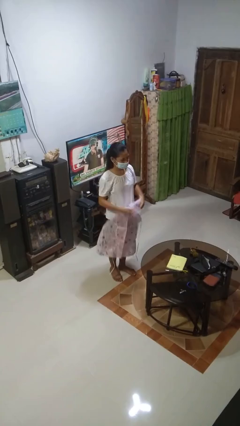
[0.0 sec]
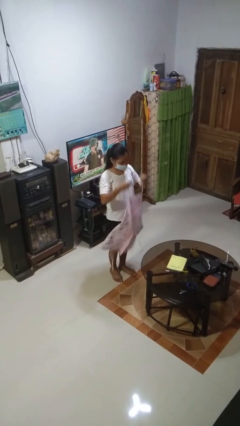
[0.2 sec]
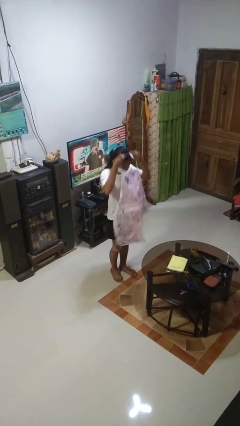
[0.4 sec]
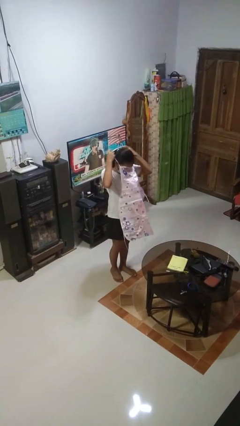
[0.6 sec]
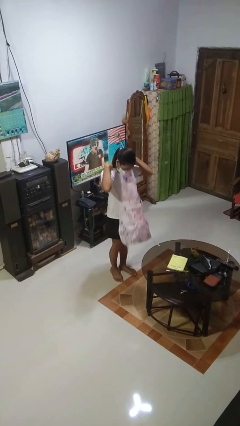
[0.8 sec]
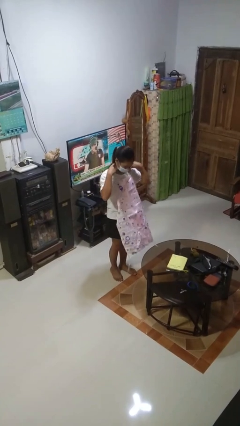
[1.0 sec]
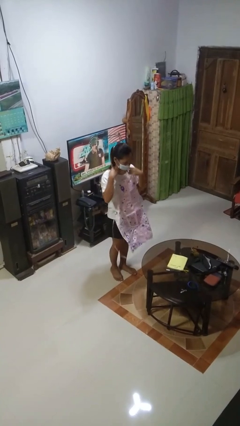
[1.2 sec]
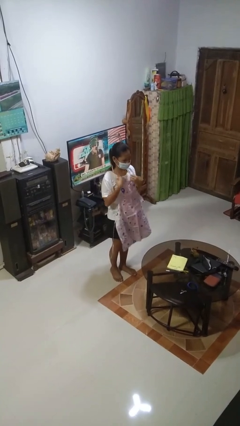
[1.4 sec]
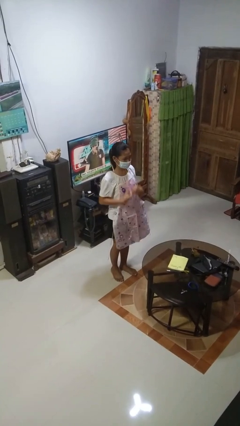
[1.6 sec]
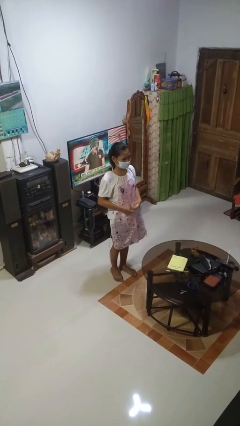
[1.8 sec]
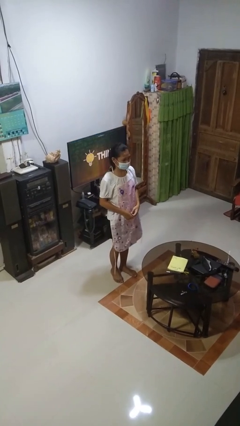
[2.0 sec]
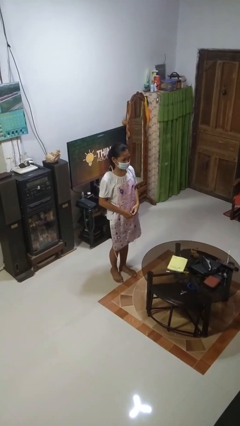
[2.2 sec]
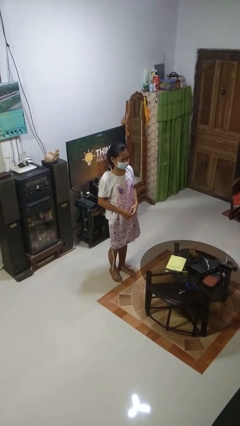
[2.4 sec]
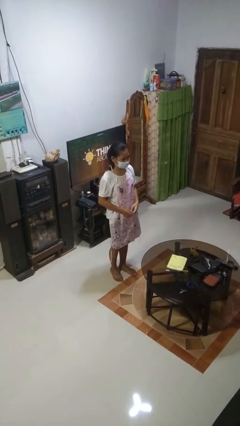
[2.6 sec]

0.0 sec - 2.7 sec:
person puts on apron

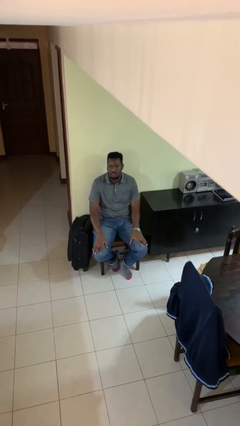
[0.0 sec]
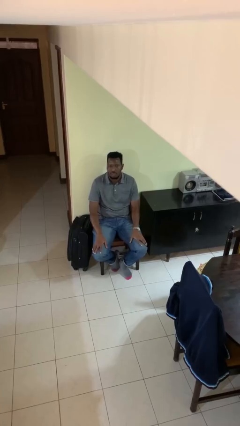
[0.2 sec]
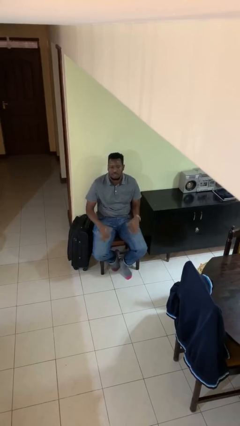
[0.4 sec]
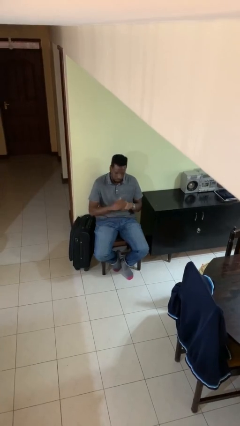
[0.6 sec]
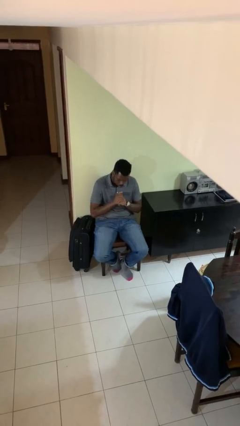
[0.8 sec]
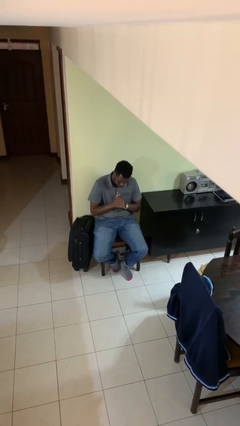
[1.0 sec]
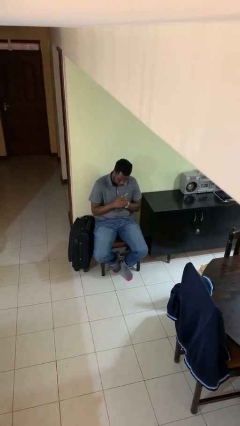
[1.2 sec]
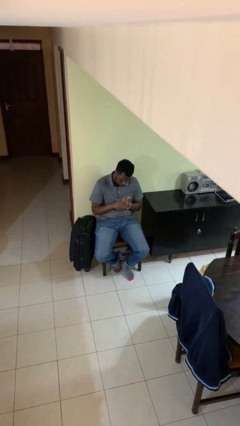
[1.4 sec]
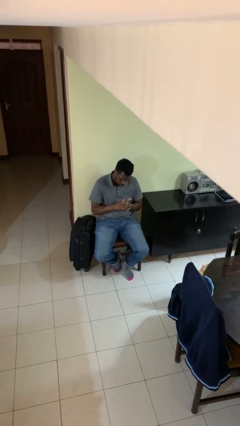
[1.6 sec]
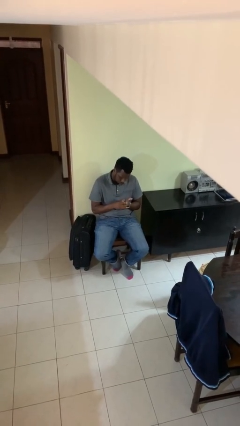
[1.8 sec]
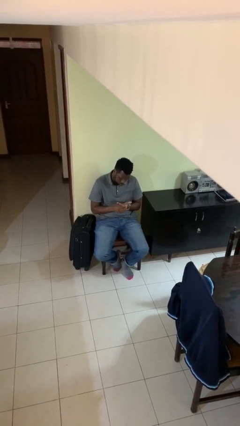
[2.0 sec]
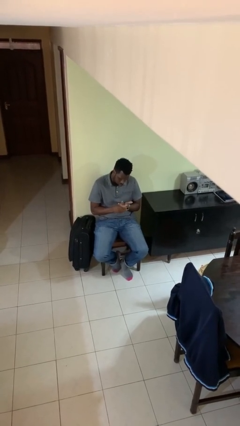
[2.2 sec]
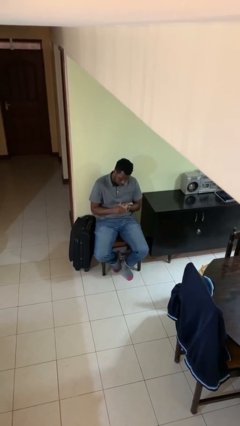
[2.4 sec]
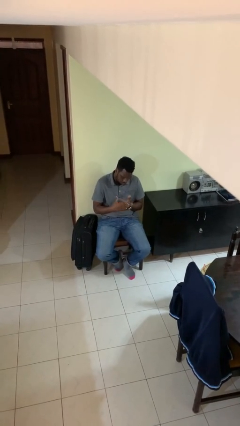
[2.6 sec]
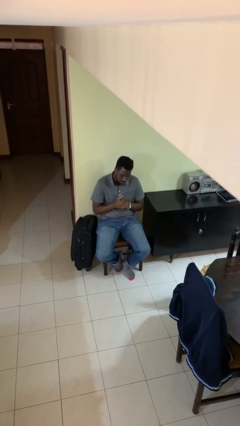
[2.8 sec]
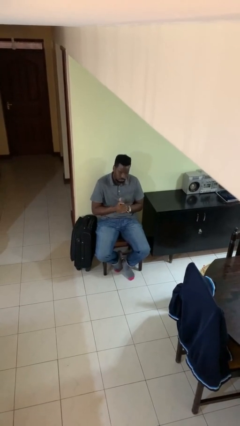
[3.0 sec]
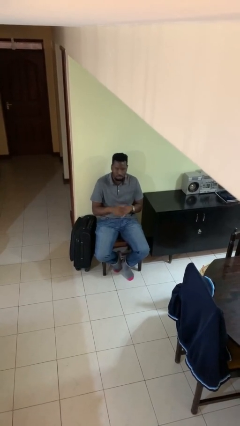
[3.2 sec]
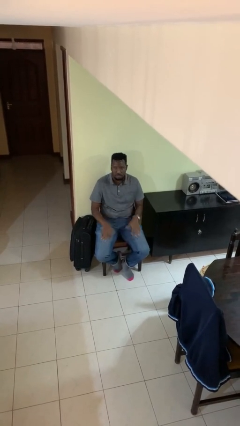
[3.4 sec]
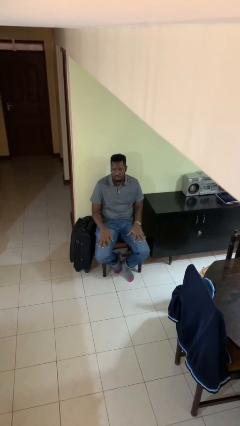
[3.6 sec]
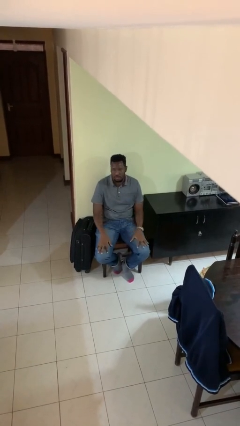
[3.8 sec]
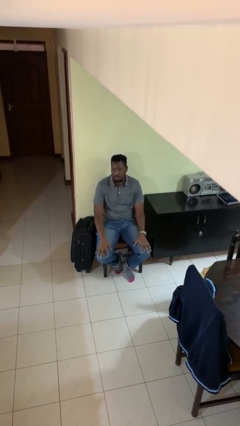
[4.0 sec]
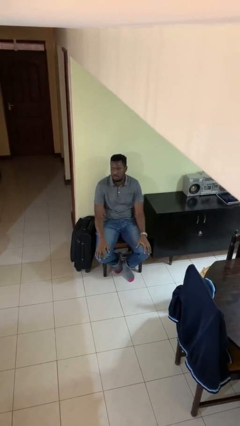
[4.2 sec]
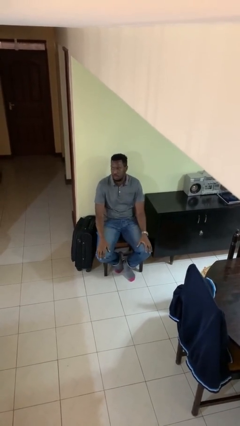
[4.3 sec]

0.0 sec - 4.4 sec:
person cracks knuckles

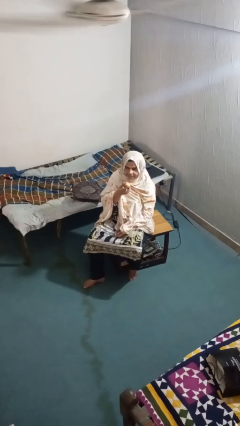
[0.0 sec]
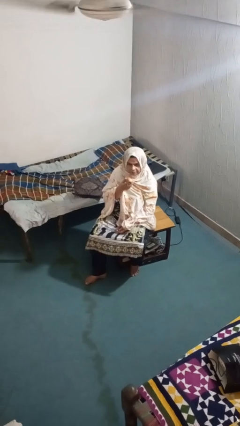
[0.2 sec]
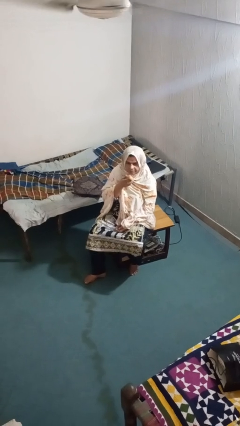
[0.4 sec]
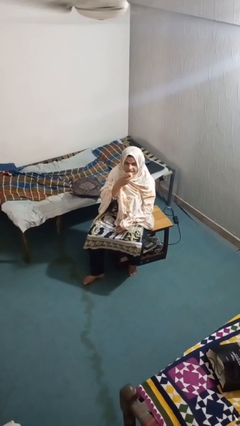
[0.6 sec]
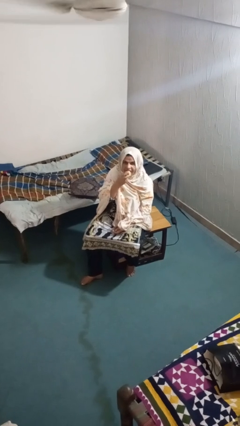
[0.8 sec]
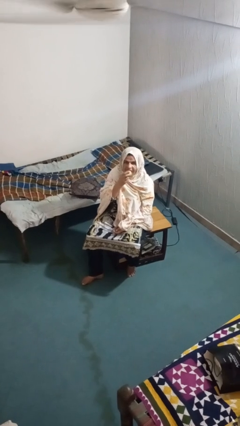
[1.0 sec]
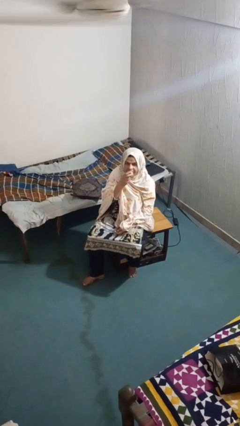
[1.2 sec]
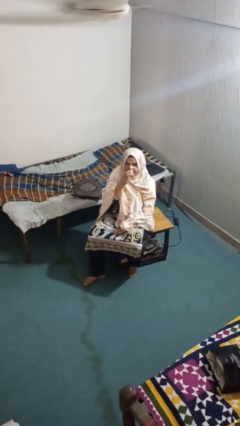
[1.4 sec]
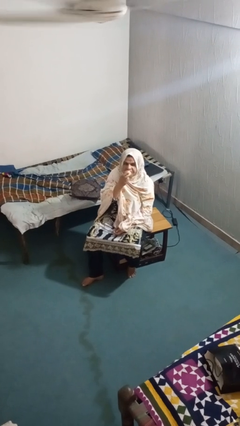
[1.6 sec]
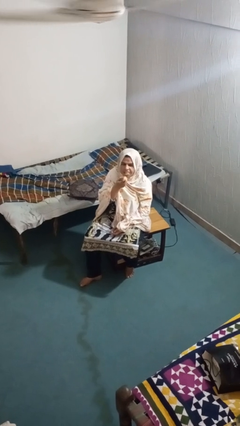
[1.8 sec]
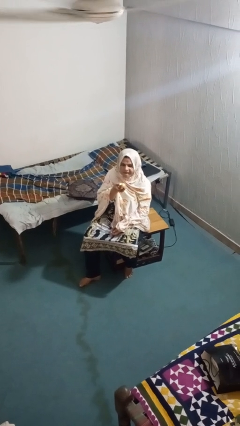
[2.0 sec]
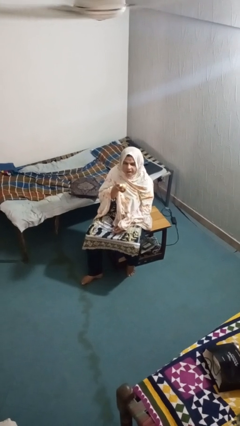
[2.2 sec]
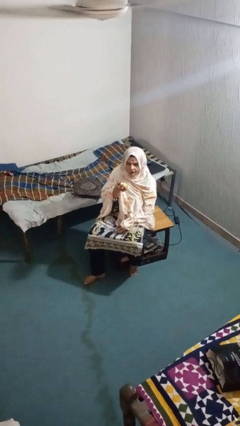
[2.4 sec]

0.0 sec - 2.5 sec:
person eats apple

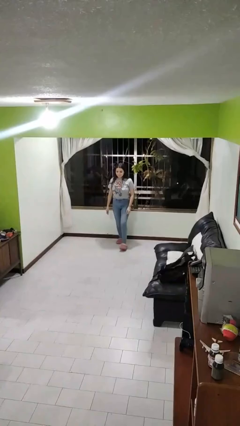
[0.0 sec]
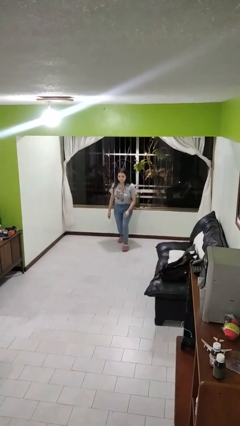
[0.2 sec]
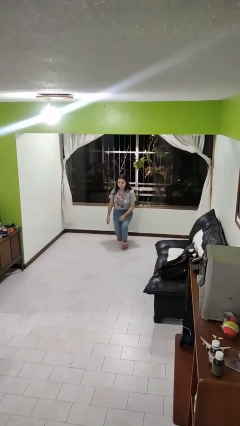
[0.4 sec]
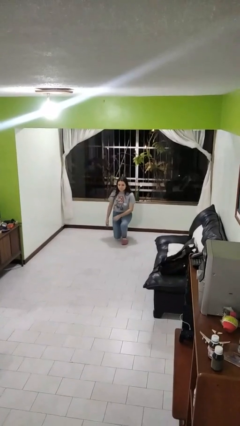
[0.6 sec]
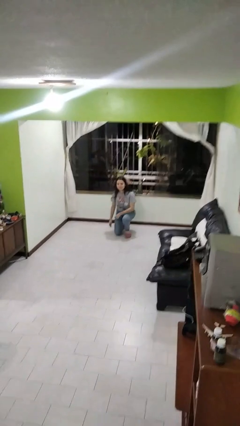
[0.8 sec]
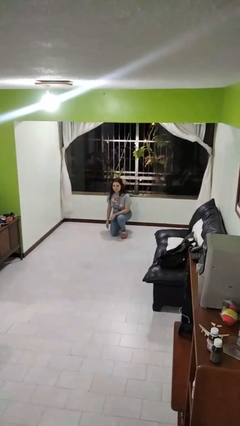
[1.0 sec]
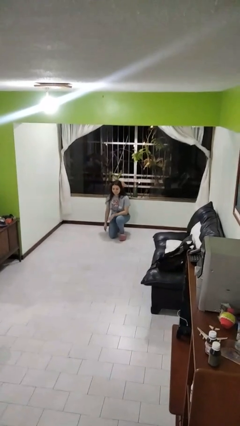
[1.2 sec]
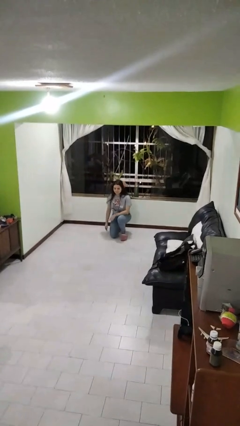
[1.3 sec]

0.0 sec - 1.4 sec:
person kneels

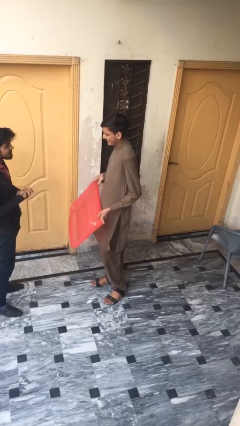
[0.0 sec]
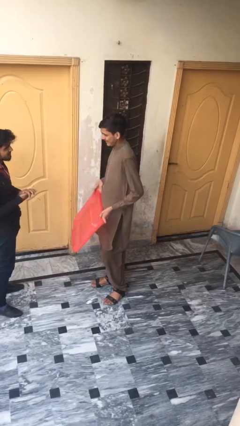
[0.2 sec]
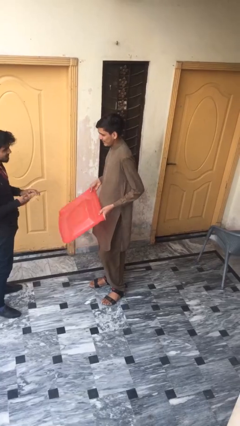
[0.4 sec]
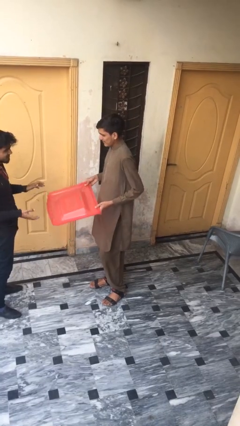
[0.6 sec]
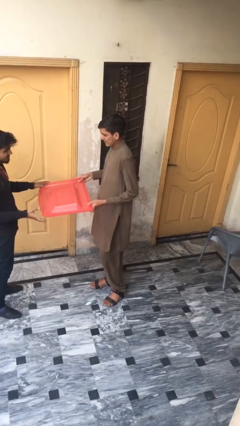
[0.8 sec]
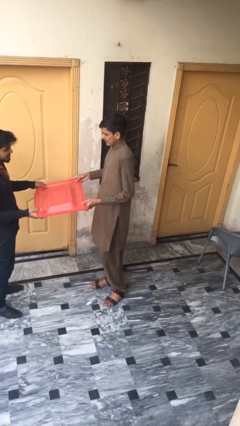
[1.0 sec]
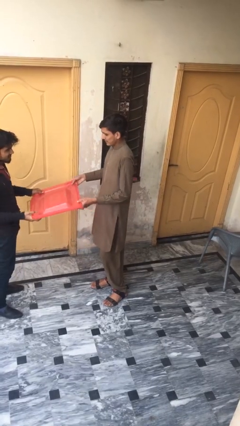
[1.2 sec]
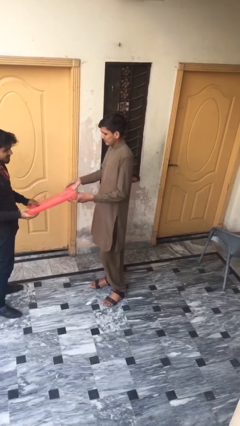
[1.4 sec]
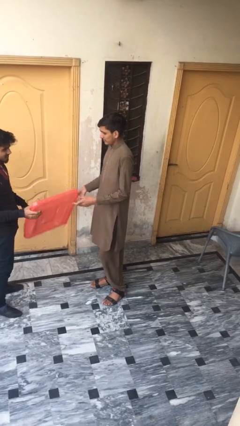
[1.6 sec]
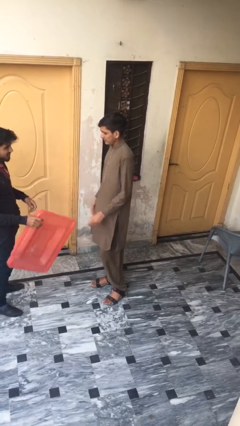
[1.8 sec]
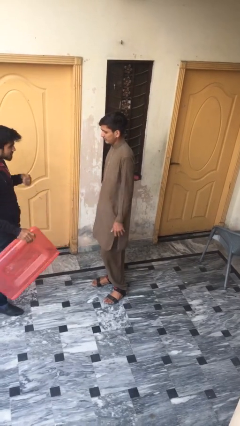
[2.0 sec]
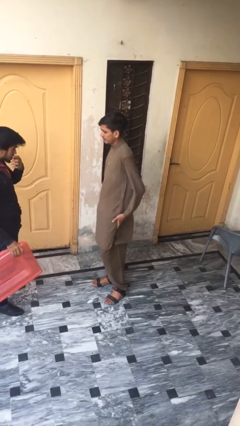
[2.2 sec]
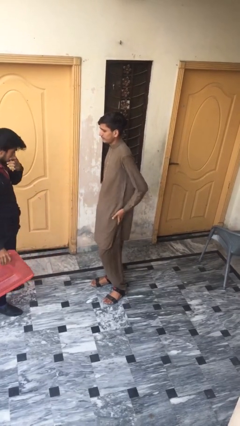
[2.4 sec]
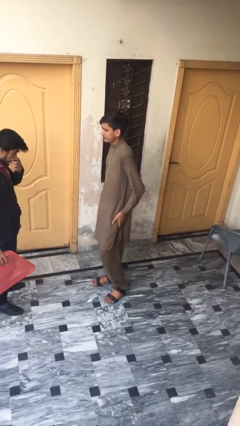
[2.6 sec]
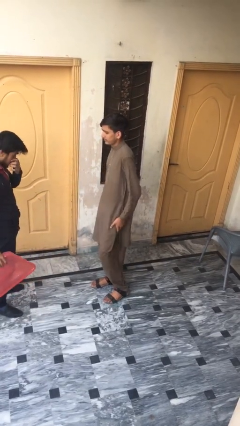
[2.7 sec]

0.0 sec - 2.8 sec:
person transfers object to person

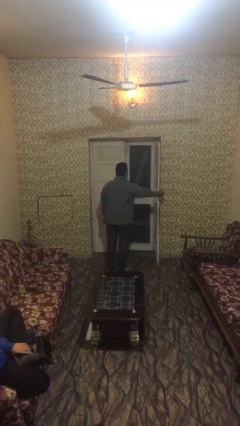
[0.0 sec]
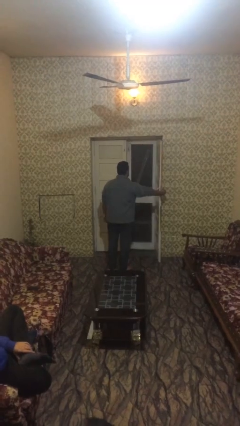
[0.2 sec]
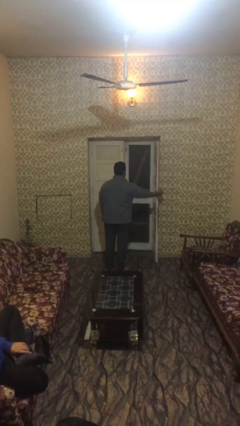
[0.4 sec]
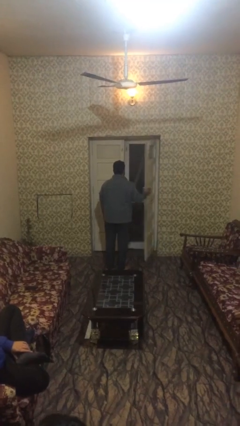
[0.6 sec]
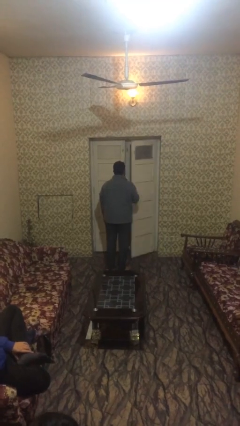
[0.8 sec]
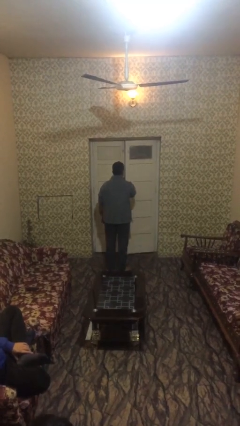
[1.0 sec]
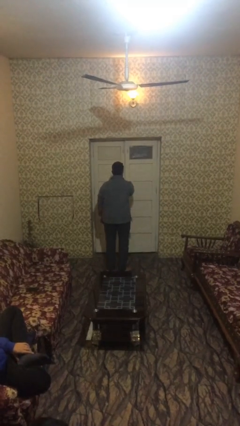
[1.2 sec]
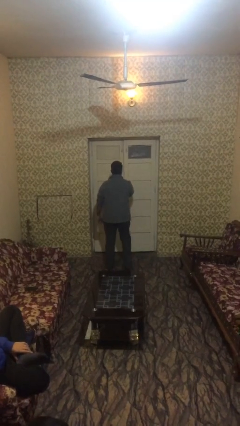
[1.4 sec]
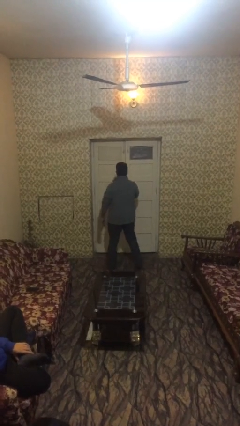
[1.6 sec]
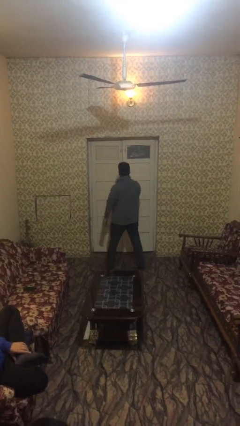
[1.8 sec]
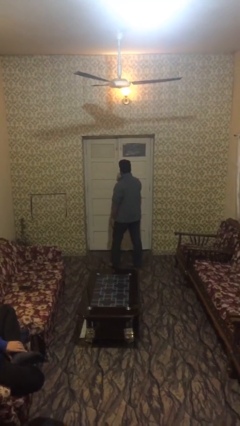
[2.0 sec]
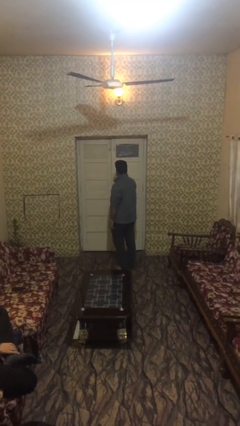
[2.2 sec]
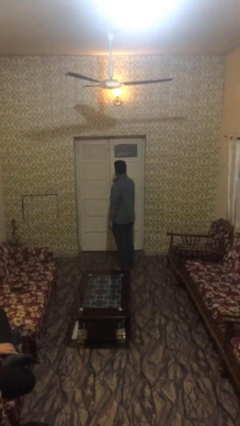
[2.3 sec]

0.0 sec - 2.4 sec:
person closes facility door

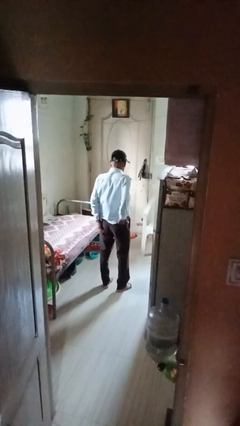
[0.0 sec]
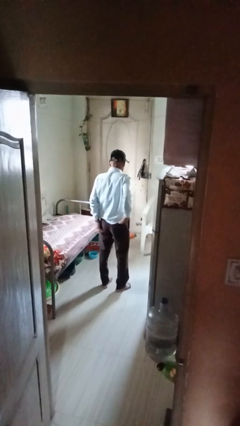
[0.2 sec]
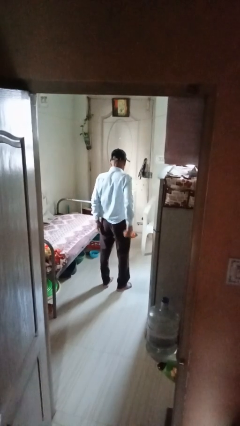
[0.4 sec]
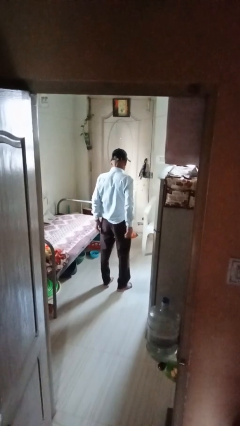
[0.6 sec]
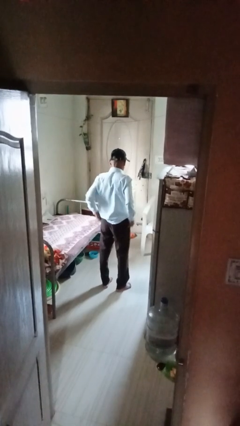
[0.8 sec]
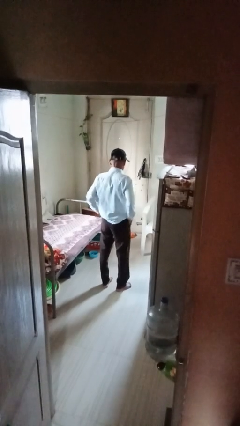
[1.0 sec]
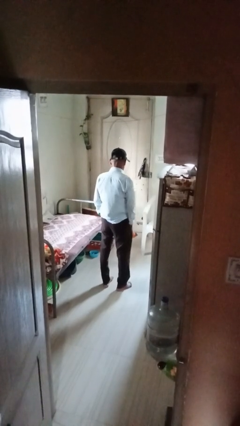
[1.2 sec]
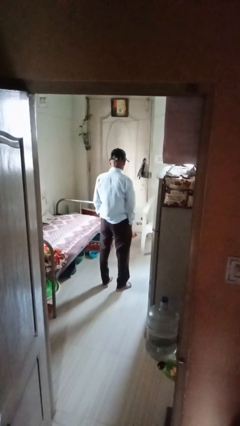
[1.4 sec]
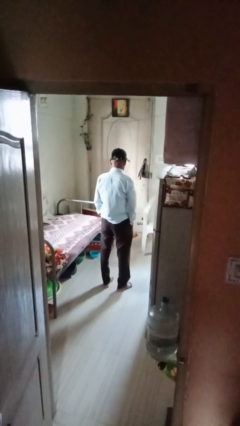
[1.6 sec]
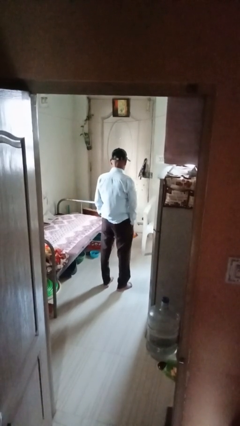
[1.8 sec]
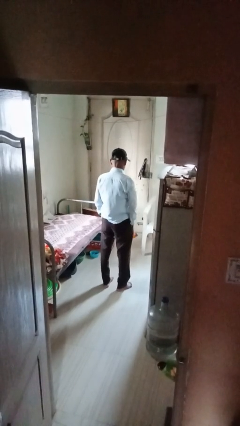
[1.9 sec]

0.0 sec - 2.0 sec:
person puts hands in back pockets
